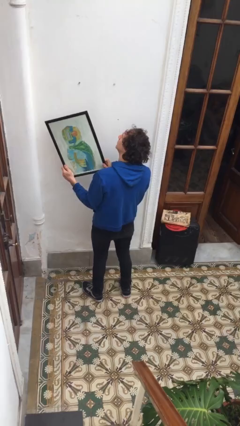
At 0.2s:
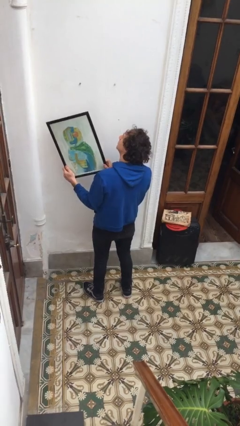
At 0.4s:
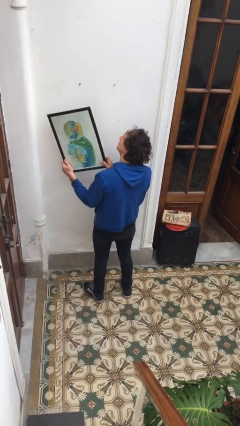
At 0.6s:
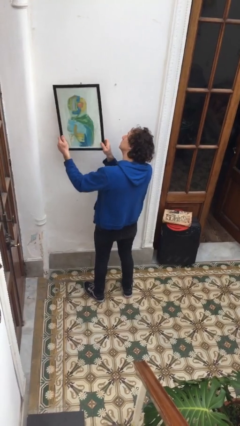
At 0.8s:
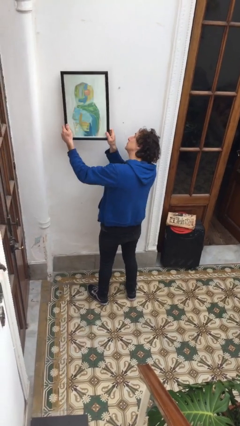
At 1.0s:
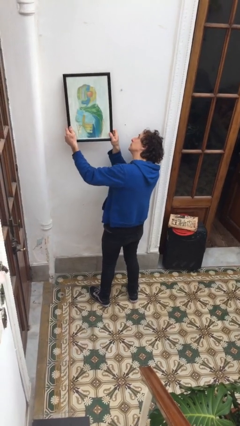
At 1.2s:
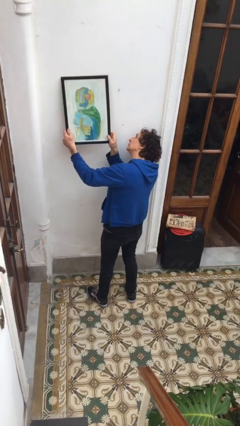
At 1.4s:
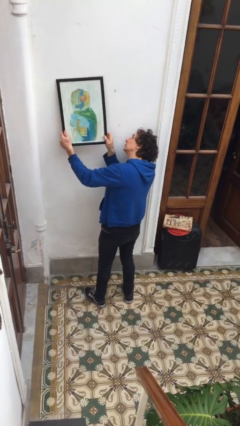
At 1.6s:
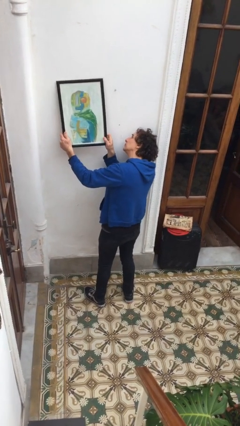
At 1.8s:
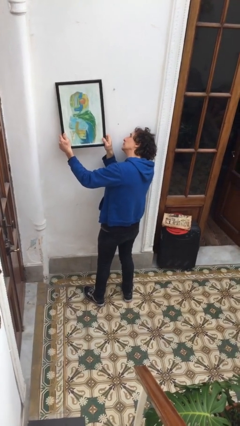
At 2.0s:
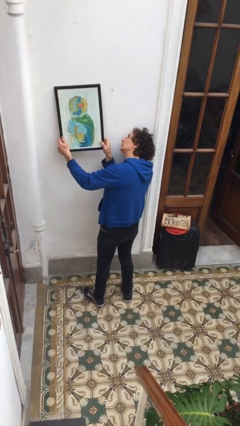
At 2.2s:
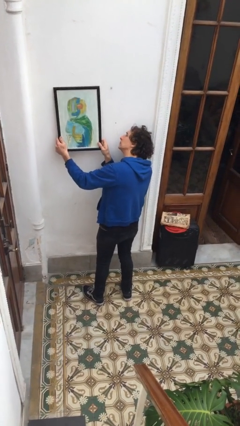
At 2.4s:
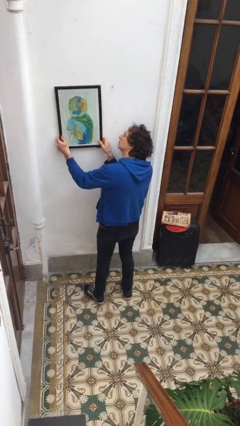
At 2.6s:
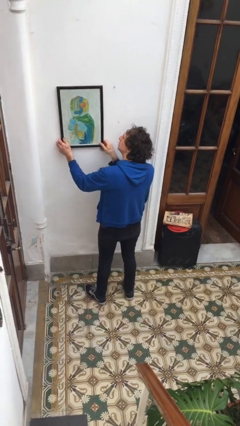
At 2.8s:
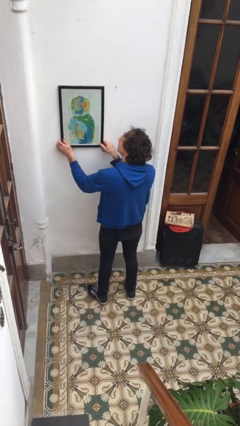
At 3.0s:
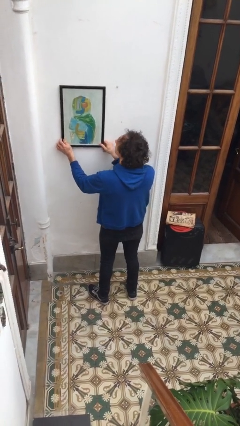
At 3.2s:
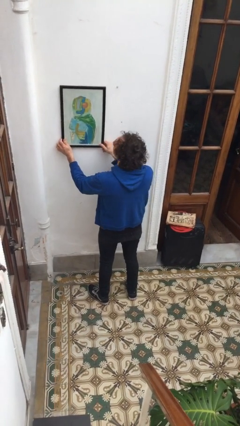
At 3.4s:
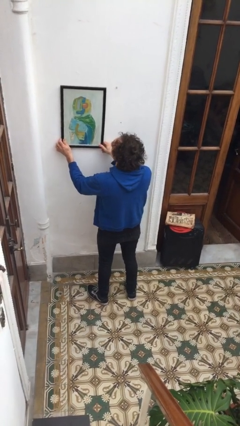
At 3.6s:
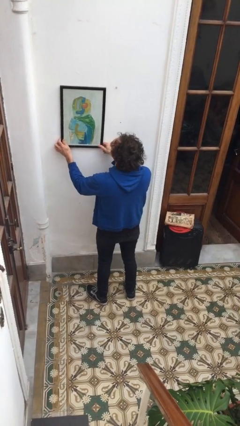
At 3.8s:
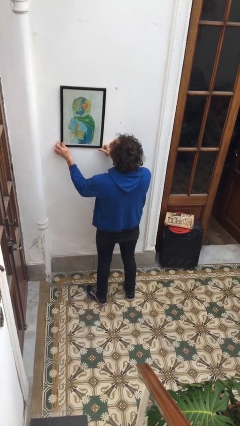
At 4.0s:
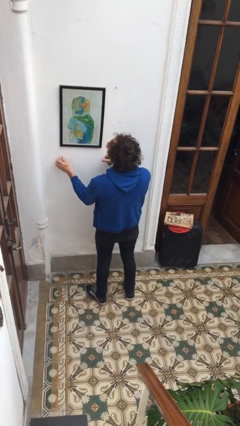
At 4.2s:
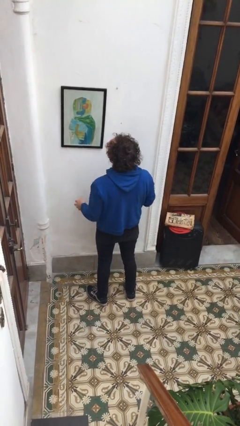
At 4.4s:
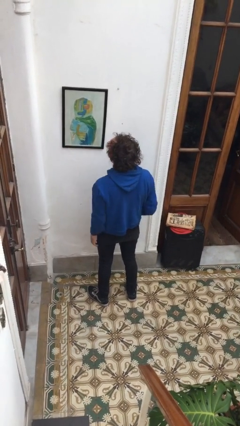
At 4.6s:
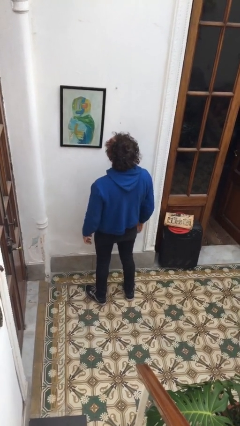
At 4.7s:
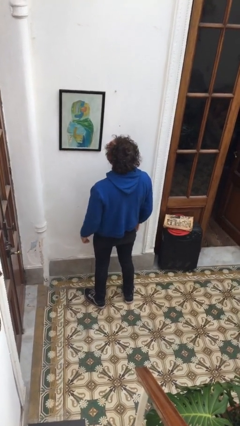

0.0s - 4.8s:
person puts up picture frame

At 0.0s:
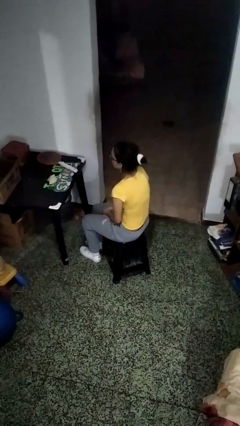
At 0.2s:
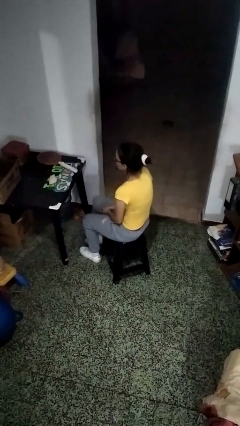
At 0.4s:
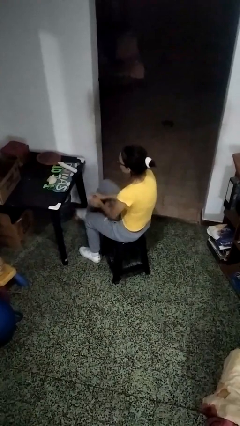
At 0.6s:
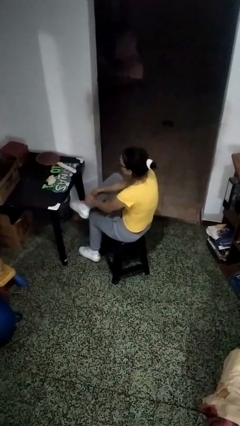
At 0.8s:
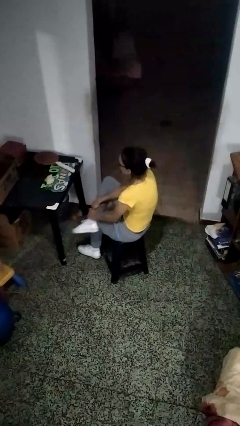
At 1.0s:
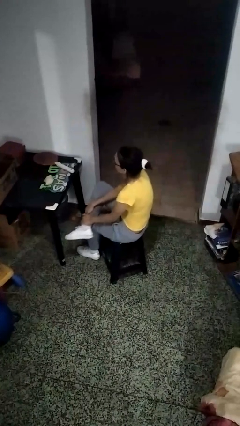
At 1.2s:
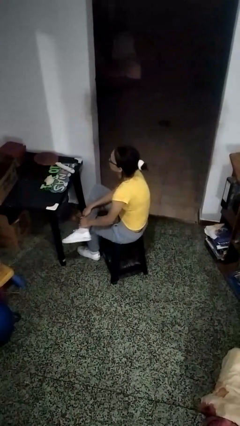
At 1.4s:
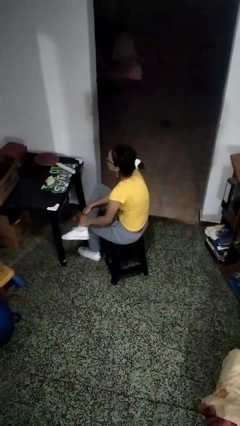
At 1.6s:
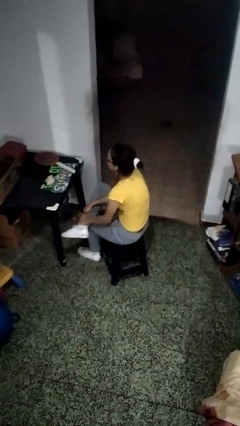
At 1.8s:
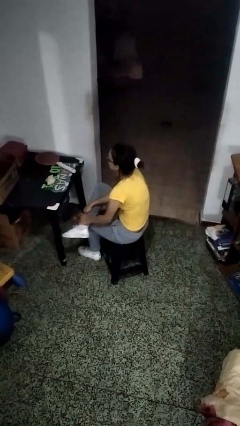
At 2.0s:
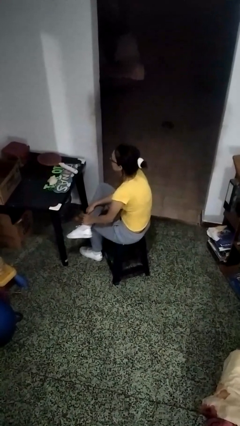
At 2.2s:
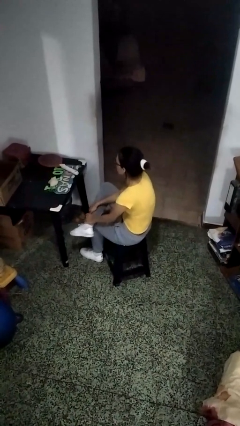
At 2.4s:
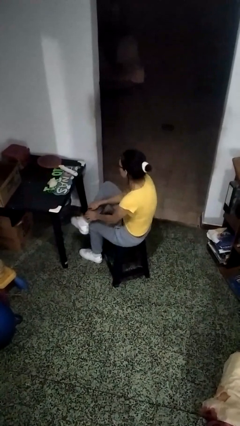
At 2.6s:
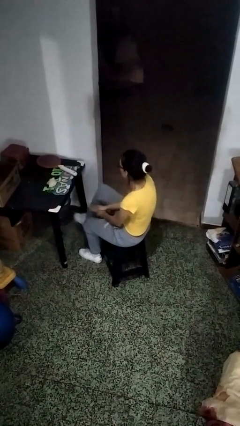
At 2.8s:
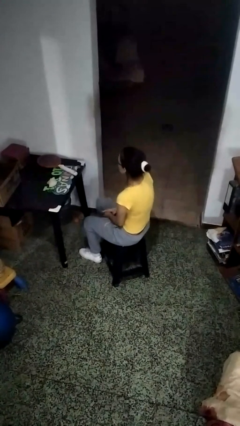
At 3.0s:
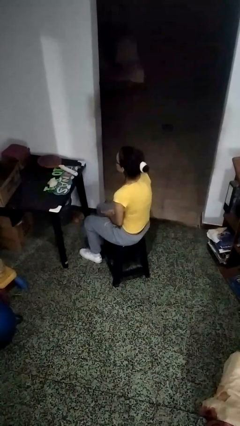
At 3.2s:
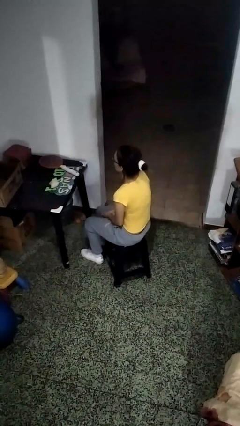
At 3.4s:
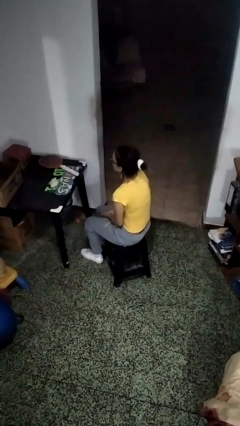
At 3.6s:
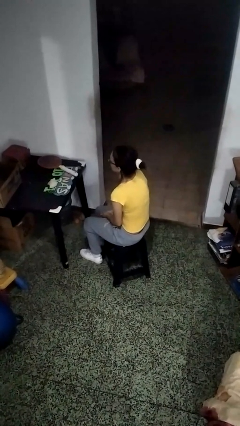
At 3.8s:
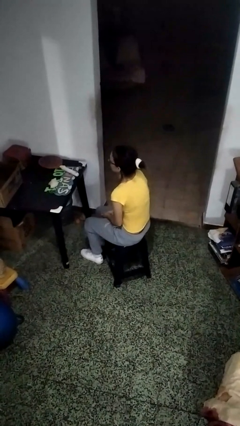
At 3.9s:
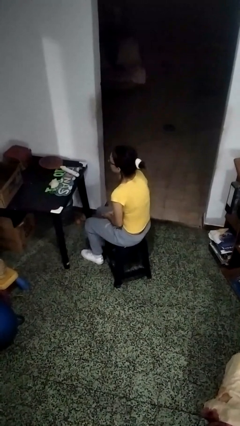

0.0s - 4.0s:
person crosses legs

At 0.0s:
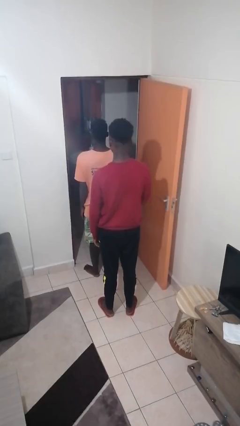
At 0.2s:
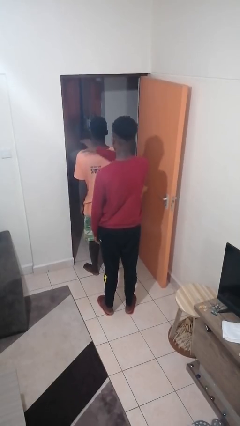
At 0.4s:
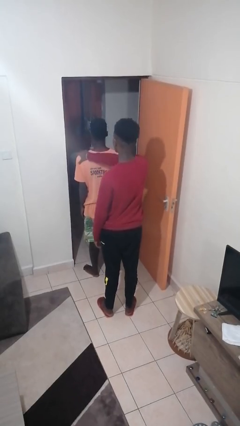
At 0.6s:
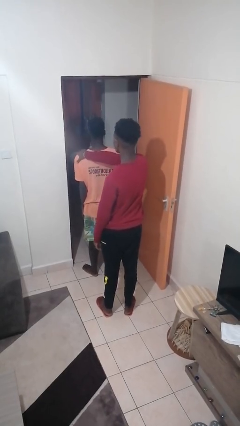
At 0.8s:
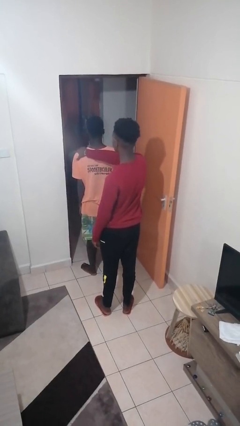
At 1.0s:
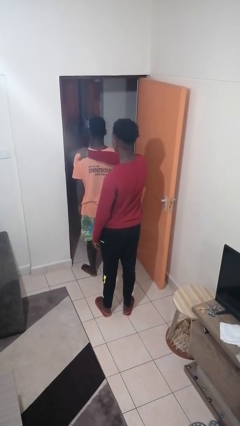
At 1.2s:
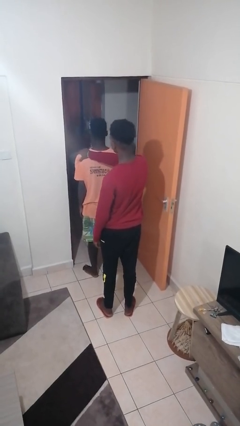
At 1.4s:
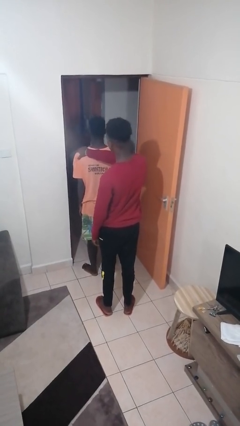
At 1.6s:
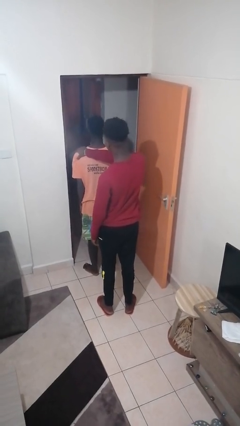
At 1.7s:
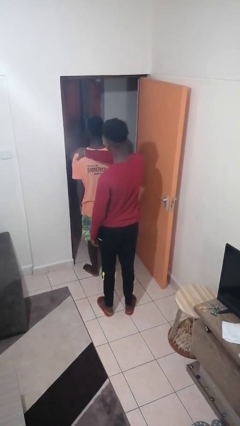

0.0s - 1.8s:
person grabs person by shoulder

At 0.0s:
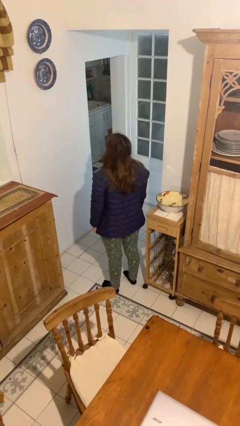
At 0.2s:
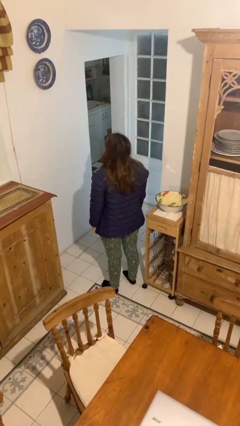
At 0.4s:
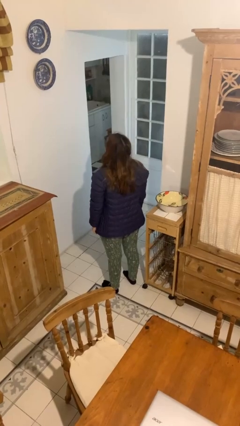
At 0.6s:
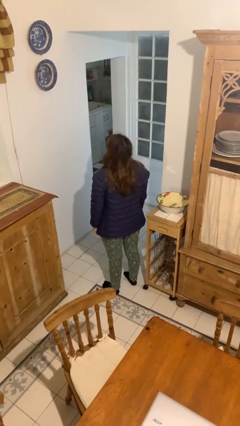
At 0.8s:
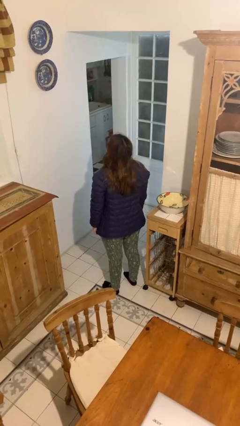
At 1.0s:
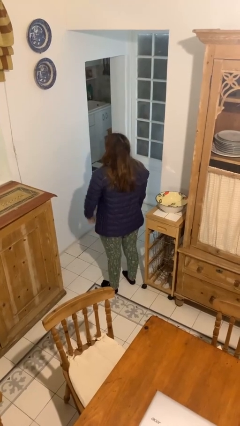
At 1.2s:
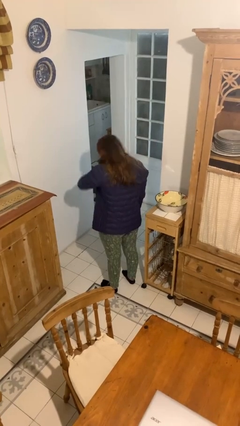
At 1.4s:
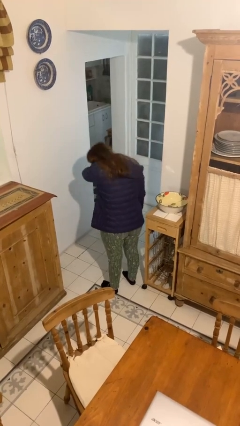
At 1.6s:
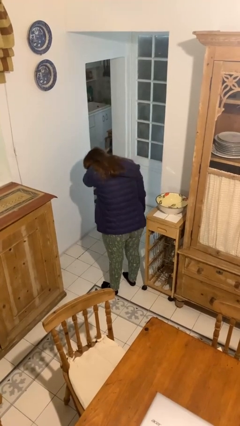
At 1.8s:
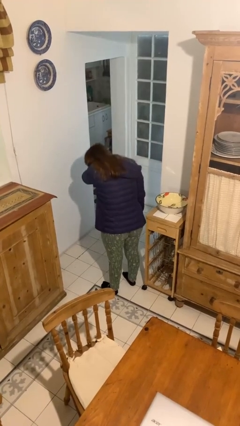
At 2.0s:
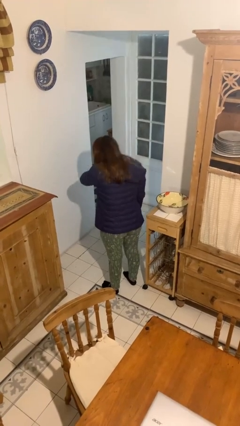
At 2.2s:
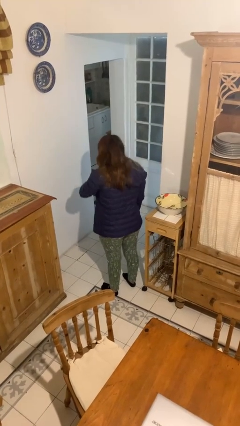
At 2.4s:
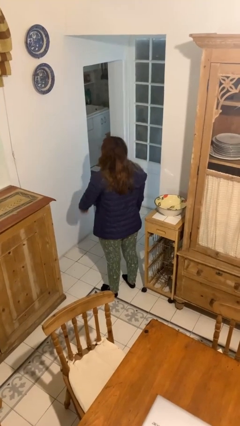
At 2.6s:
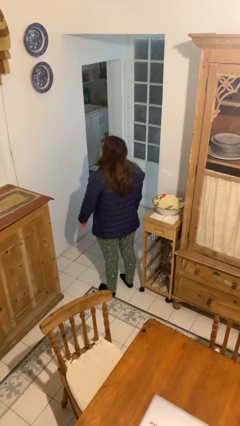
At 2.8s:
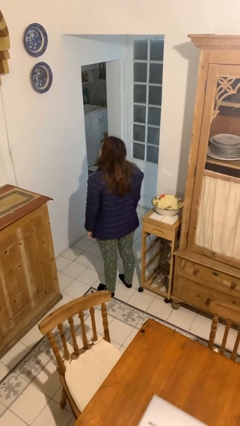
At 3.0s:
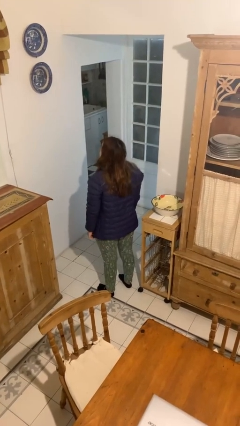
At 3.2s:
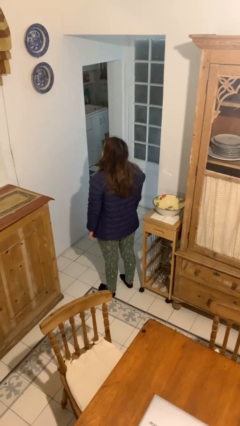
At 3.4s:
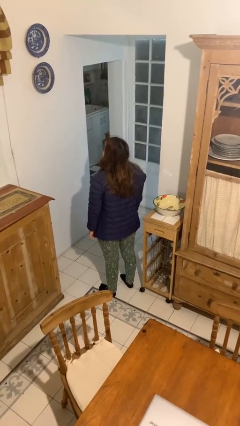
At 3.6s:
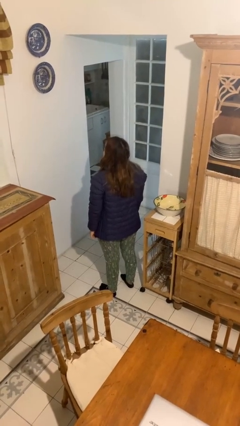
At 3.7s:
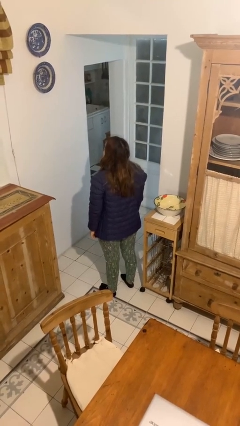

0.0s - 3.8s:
person sneezes into arm

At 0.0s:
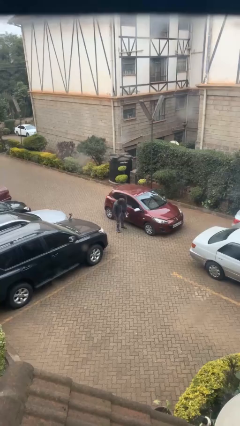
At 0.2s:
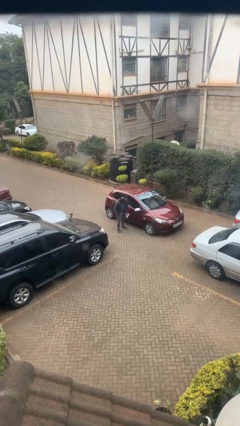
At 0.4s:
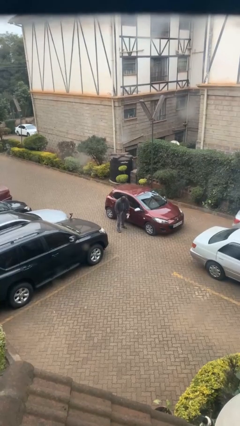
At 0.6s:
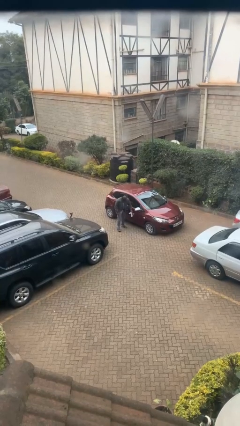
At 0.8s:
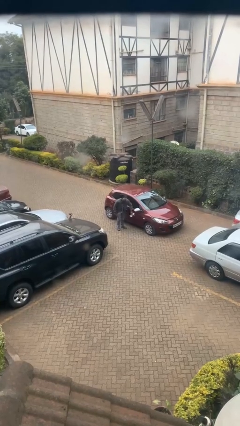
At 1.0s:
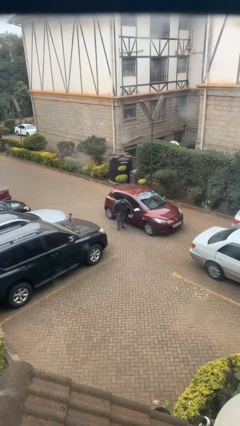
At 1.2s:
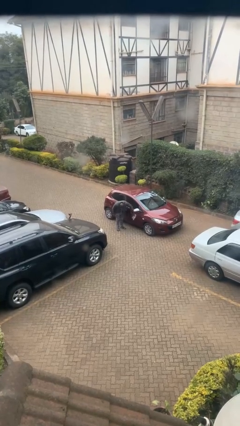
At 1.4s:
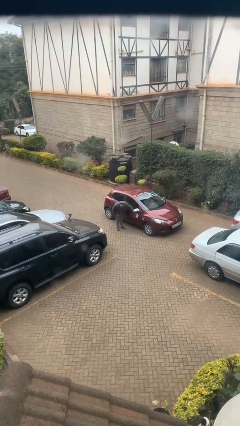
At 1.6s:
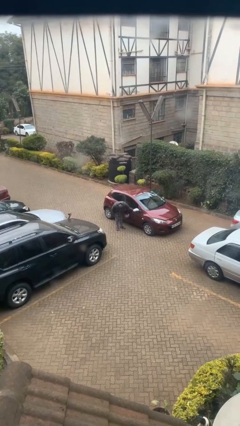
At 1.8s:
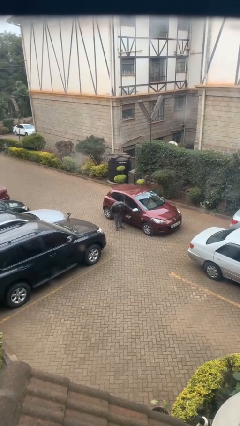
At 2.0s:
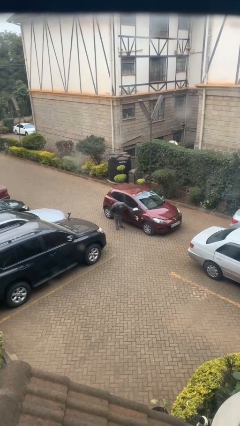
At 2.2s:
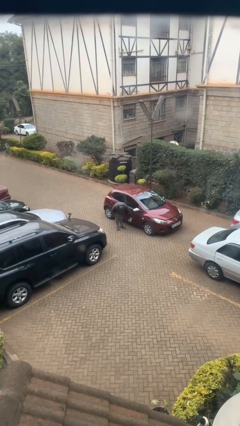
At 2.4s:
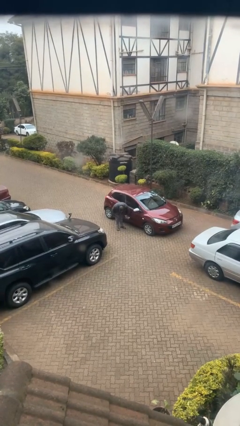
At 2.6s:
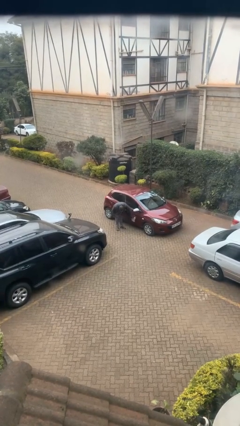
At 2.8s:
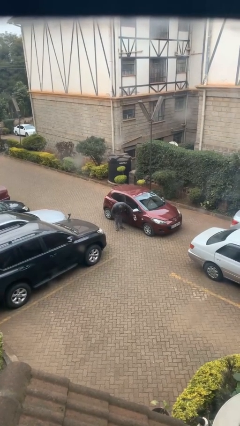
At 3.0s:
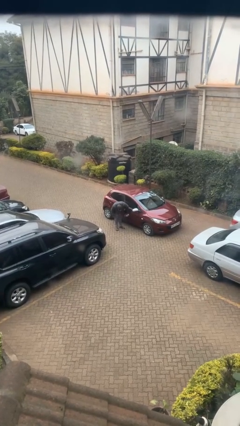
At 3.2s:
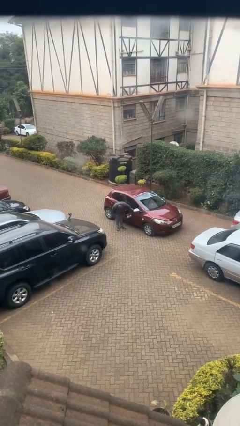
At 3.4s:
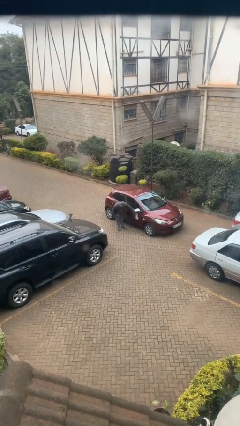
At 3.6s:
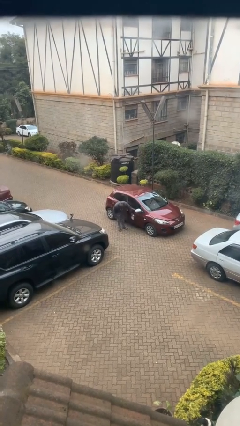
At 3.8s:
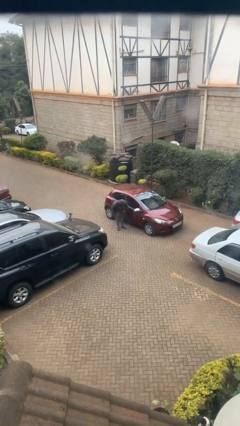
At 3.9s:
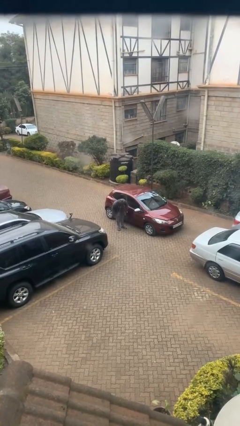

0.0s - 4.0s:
person polishes car with rag
